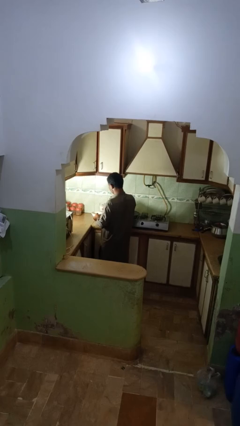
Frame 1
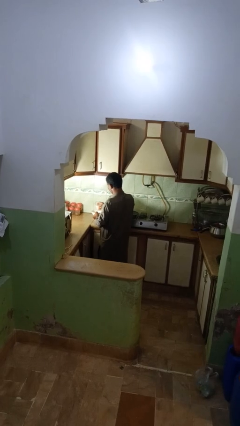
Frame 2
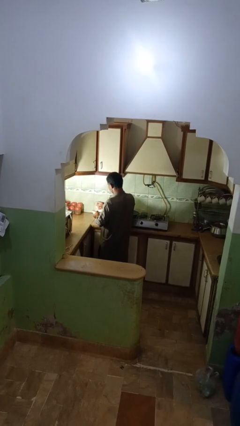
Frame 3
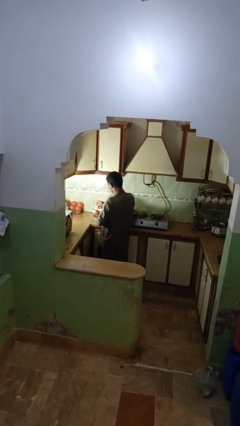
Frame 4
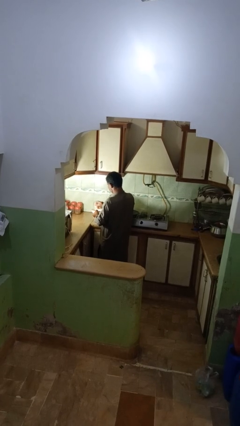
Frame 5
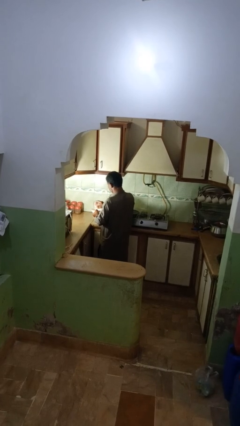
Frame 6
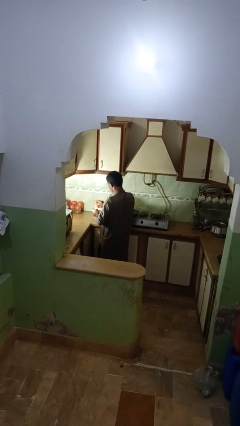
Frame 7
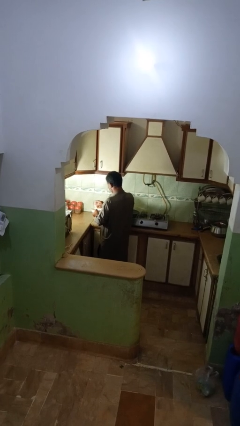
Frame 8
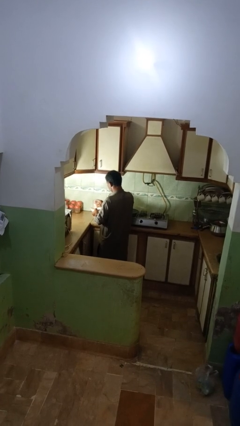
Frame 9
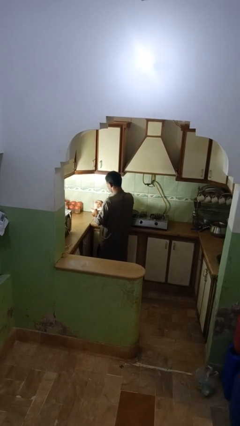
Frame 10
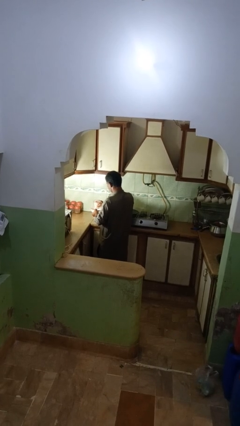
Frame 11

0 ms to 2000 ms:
person pours into bowl

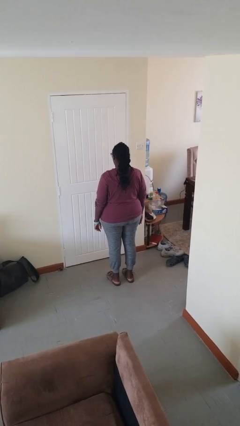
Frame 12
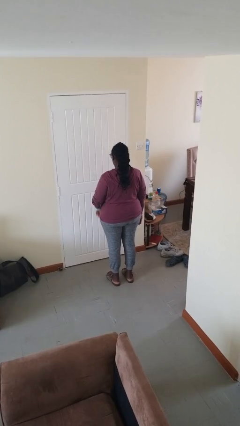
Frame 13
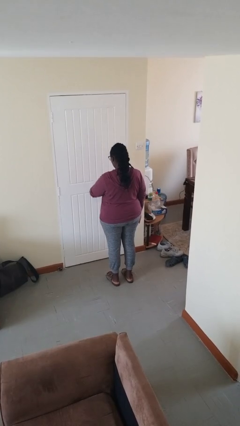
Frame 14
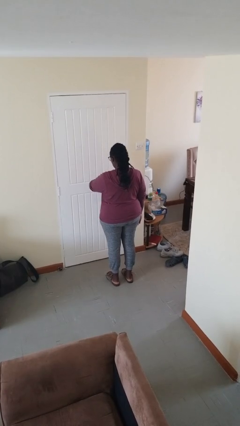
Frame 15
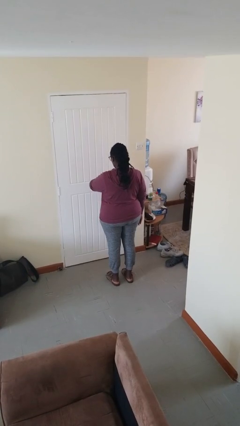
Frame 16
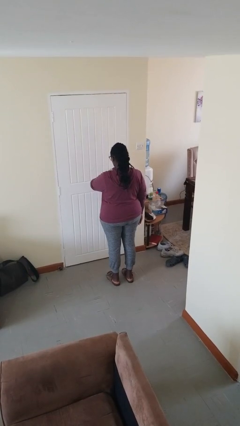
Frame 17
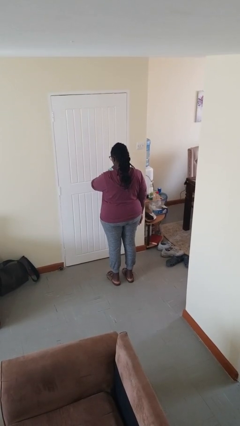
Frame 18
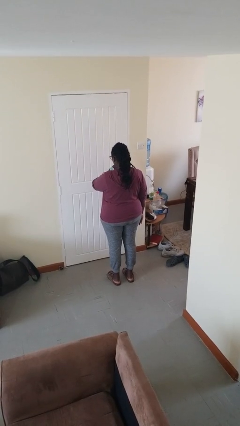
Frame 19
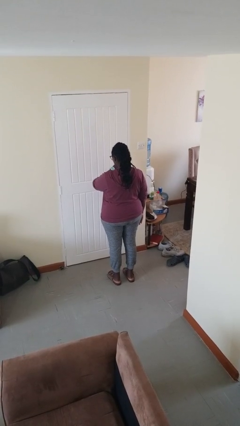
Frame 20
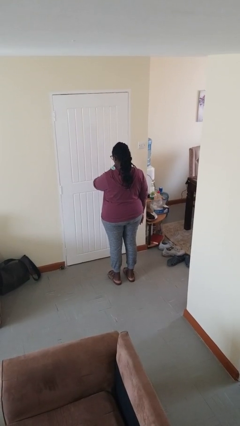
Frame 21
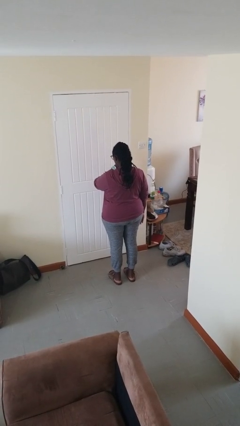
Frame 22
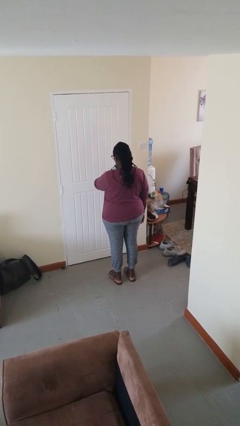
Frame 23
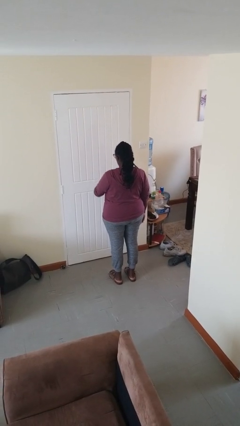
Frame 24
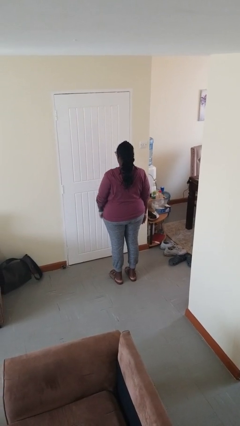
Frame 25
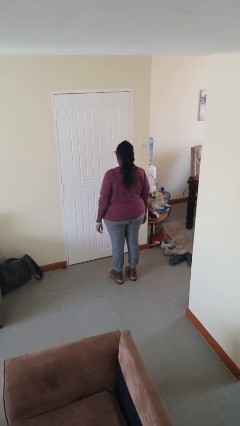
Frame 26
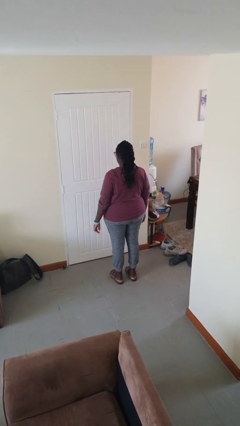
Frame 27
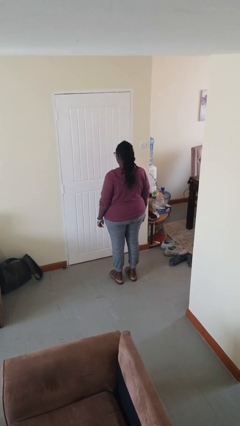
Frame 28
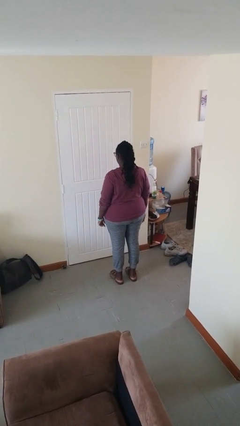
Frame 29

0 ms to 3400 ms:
person looks at wristwatch

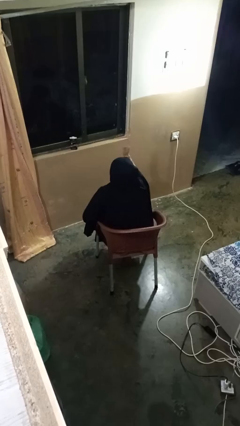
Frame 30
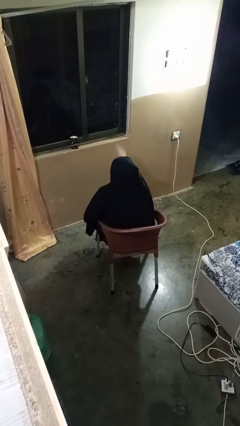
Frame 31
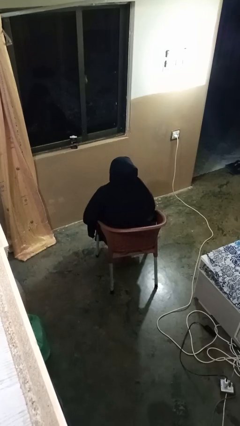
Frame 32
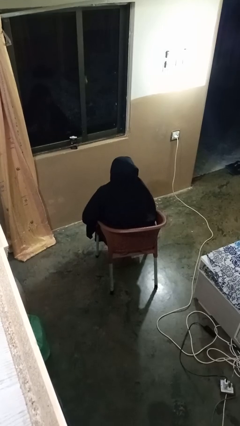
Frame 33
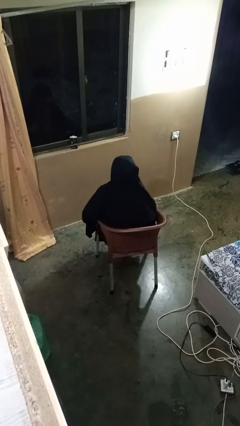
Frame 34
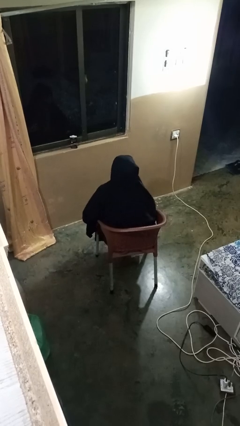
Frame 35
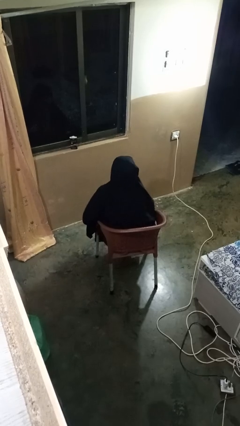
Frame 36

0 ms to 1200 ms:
person gestures swipe down

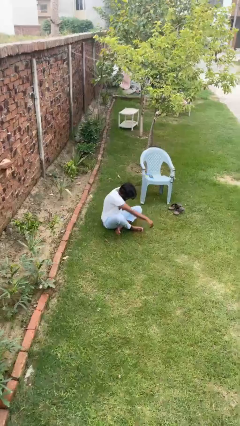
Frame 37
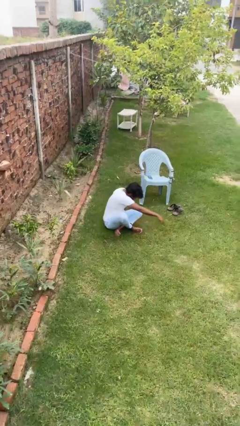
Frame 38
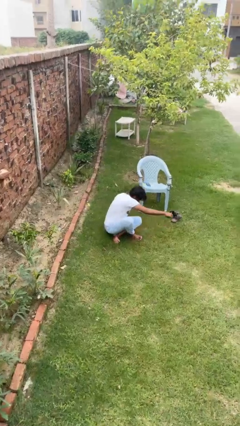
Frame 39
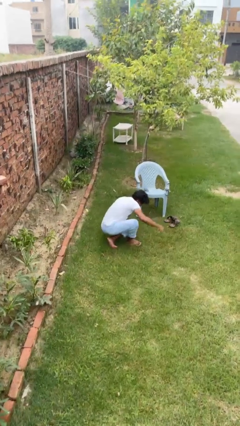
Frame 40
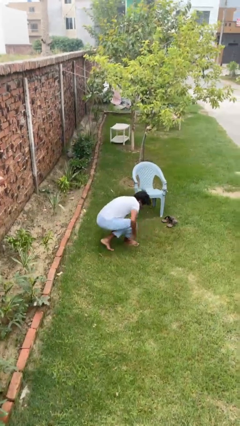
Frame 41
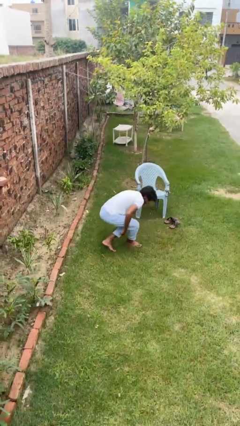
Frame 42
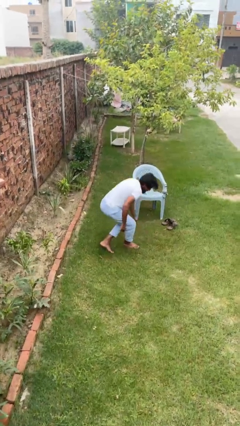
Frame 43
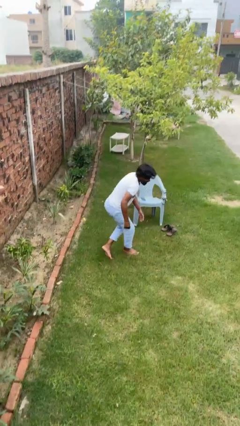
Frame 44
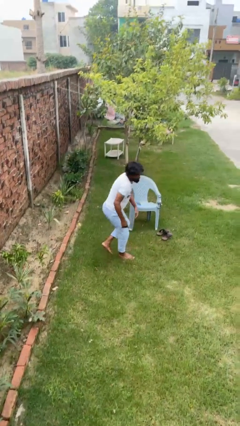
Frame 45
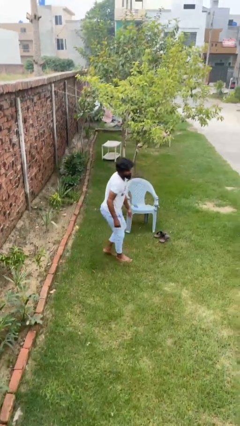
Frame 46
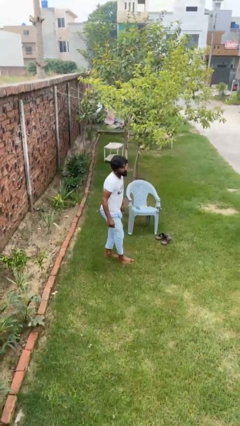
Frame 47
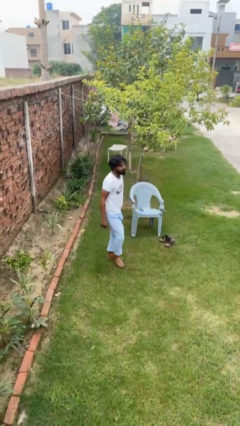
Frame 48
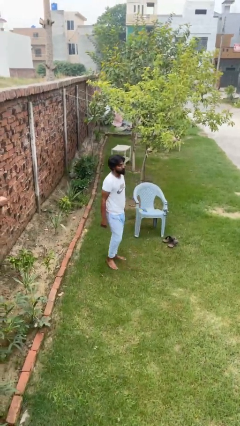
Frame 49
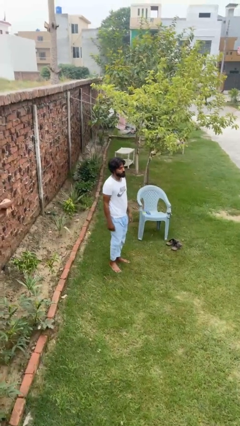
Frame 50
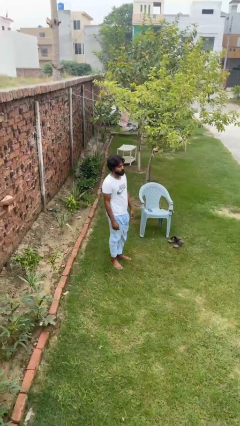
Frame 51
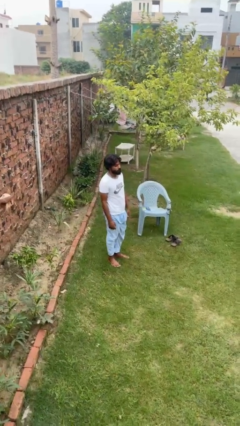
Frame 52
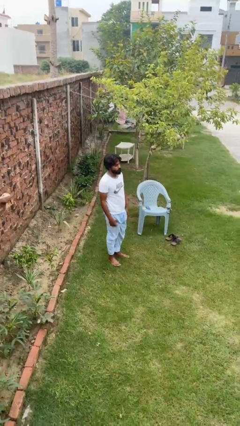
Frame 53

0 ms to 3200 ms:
person stands up from floor

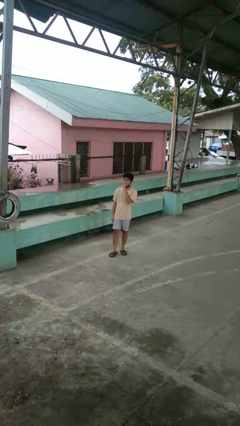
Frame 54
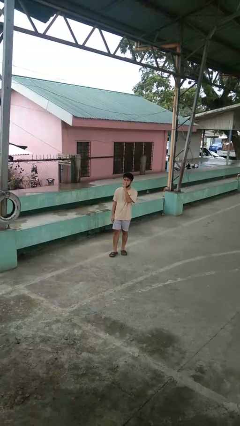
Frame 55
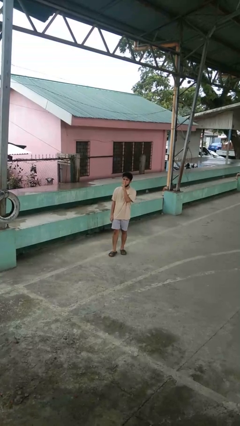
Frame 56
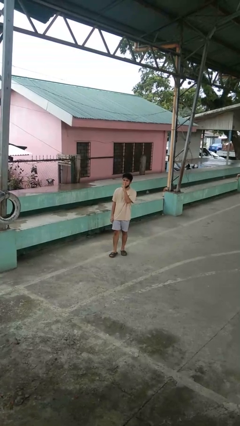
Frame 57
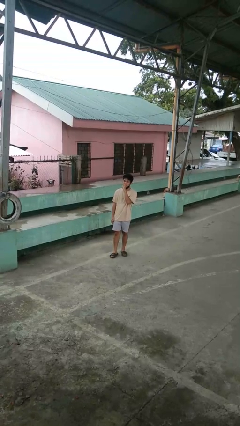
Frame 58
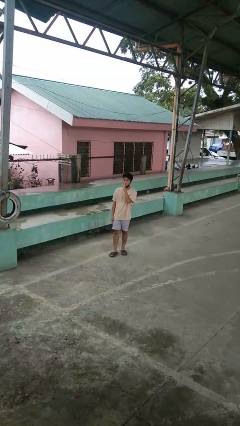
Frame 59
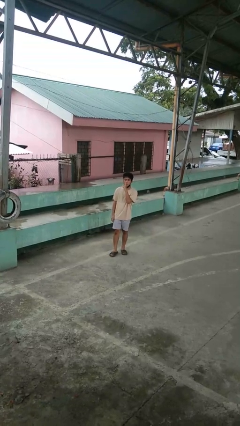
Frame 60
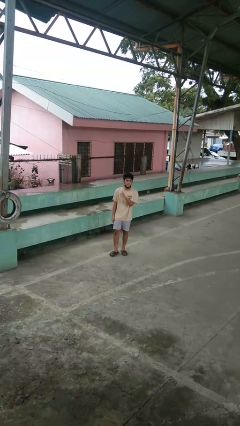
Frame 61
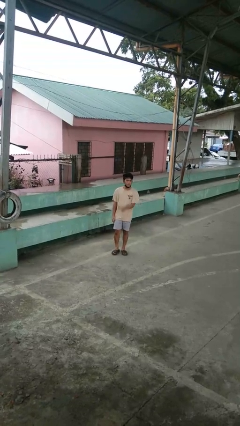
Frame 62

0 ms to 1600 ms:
person gestures be quiet

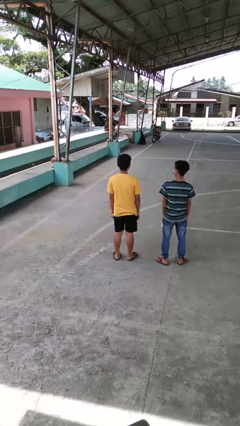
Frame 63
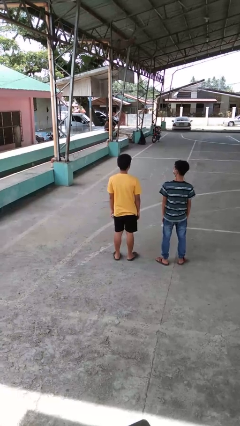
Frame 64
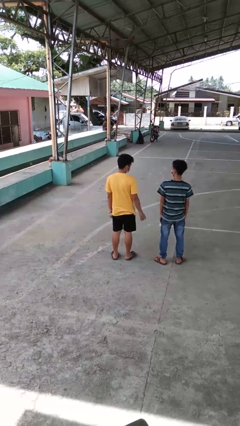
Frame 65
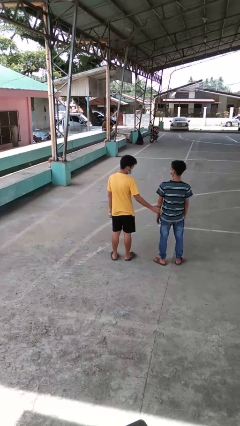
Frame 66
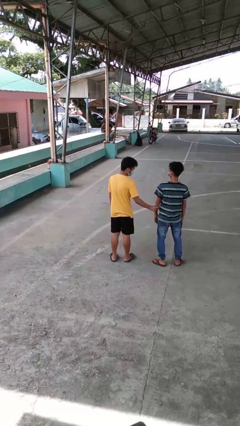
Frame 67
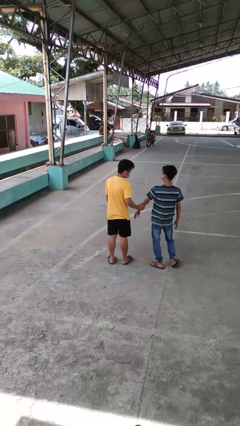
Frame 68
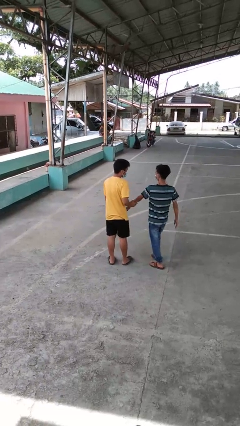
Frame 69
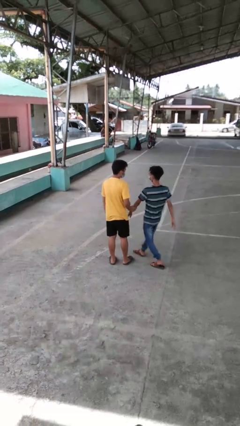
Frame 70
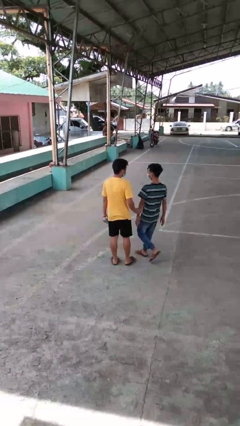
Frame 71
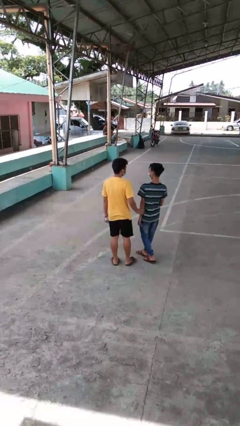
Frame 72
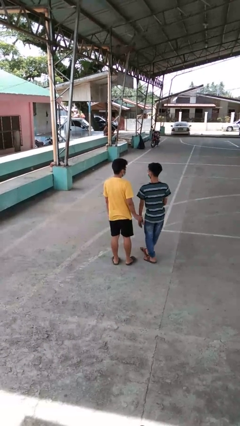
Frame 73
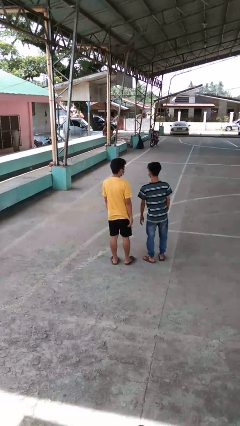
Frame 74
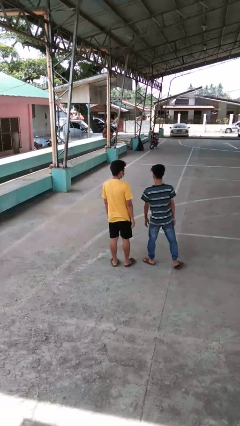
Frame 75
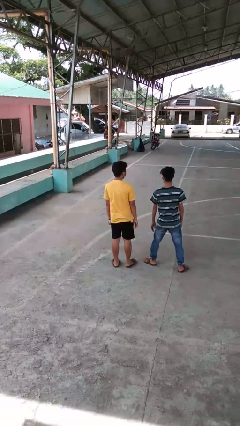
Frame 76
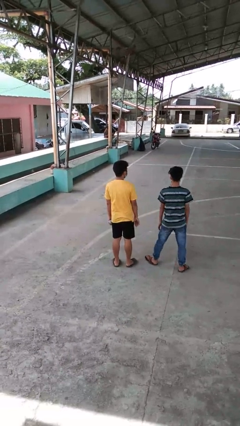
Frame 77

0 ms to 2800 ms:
person grabs person by forearm

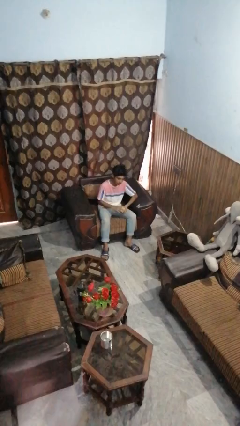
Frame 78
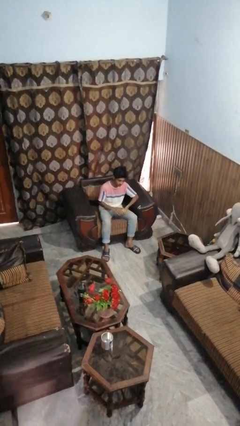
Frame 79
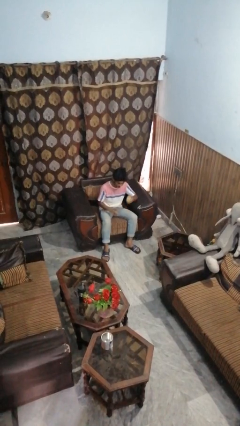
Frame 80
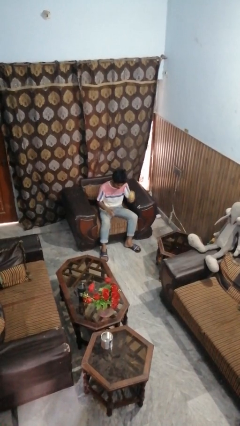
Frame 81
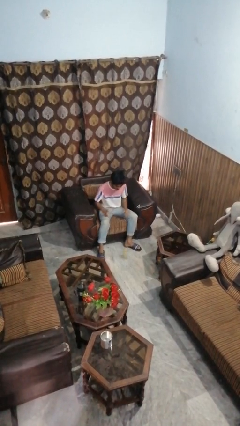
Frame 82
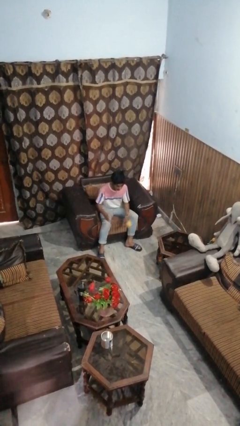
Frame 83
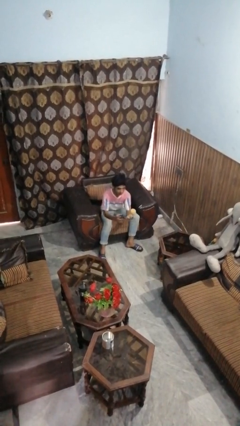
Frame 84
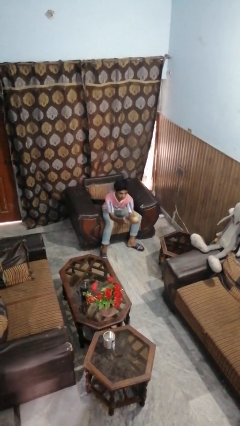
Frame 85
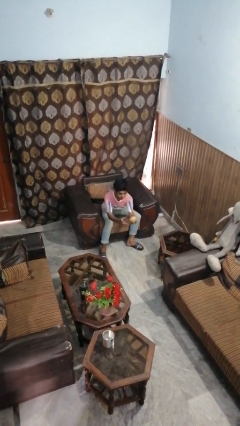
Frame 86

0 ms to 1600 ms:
person bounces ball on floor

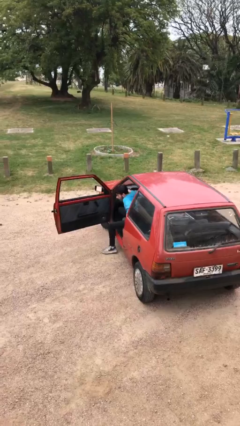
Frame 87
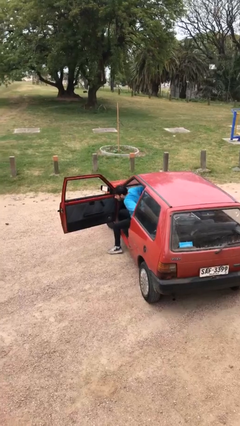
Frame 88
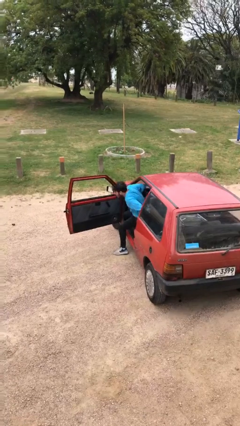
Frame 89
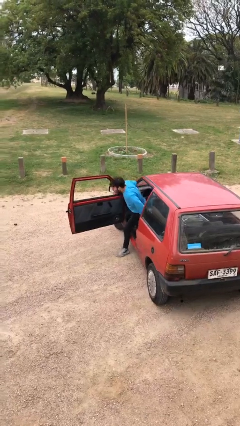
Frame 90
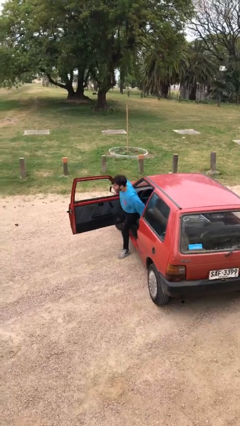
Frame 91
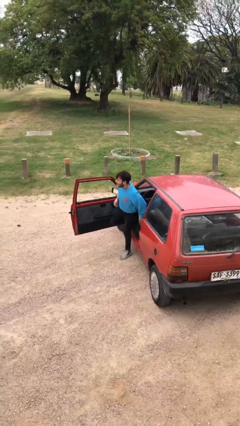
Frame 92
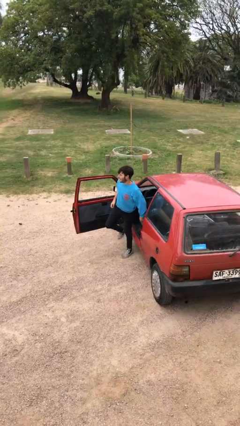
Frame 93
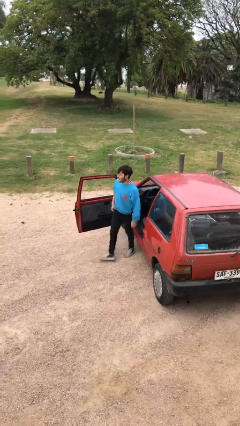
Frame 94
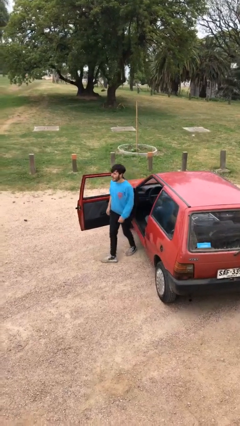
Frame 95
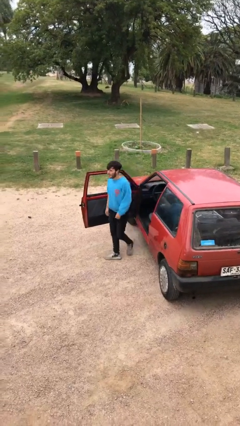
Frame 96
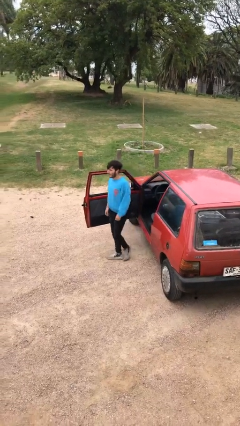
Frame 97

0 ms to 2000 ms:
person exits car
